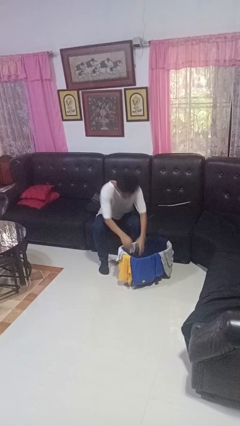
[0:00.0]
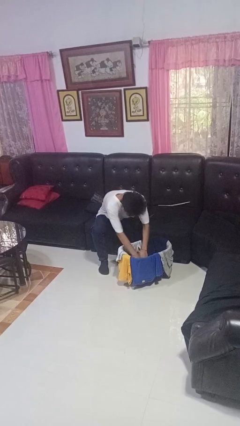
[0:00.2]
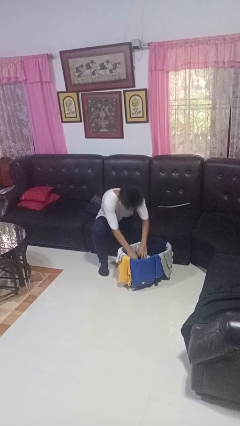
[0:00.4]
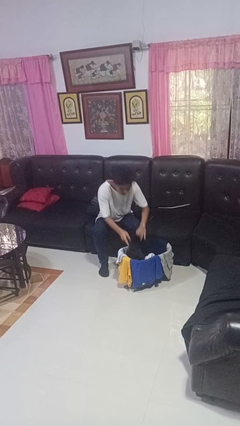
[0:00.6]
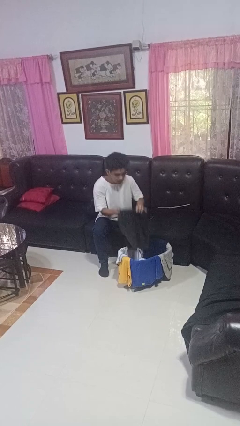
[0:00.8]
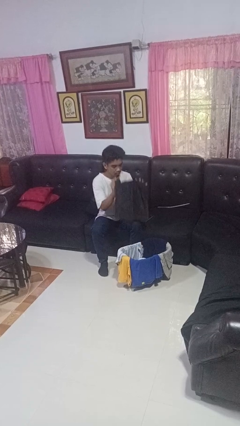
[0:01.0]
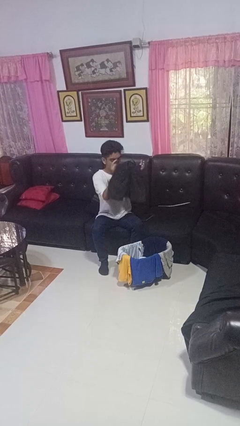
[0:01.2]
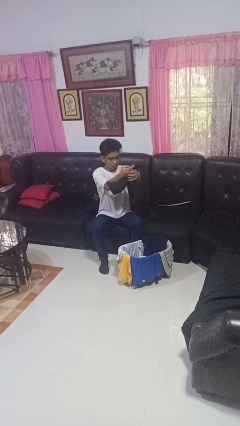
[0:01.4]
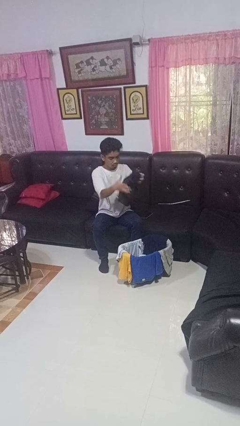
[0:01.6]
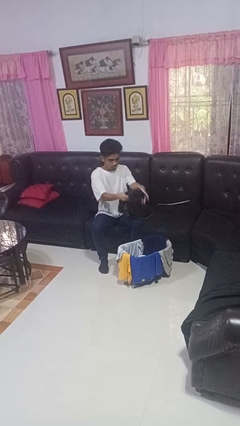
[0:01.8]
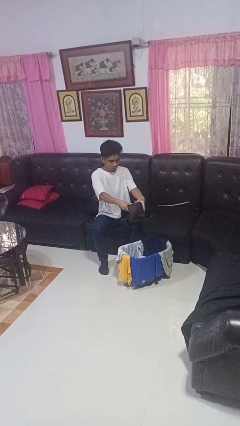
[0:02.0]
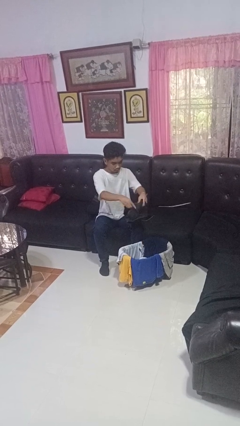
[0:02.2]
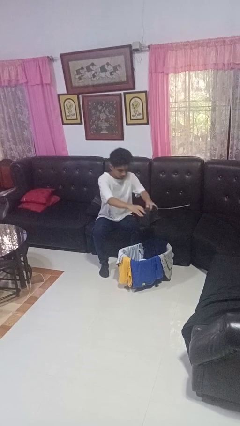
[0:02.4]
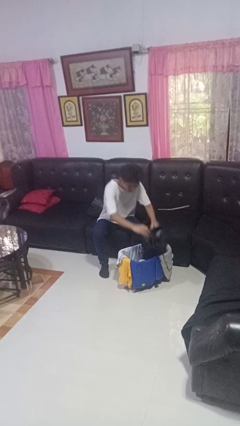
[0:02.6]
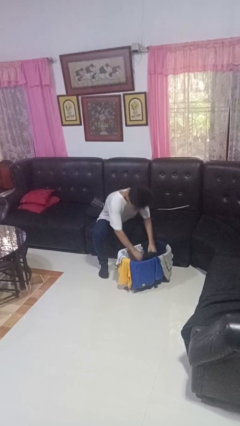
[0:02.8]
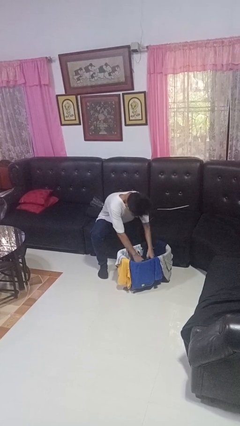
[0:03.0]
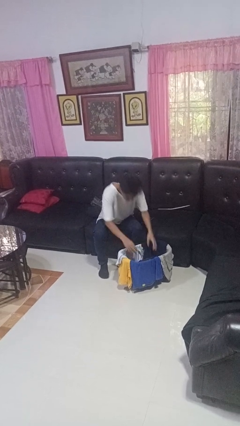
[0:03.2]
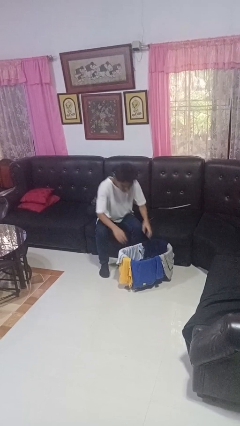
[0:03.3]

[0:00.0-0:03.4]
person folds pants

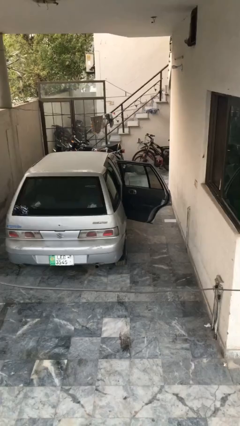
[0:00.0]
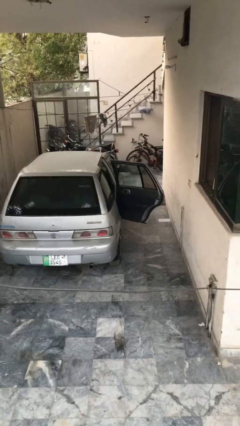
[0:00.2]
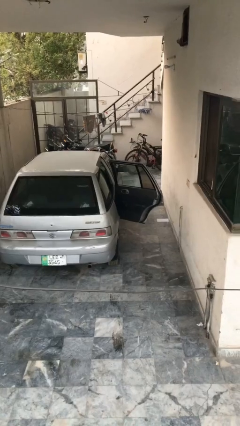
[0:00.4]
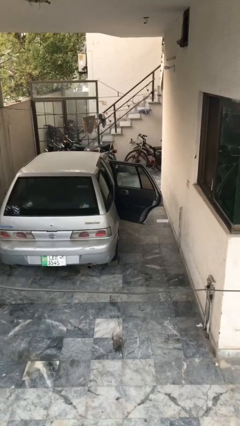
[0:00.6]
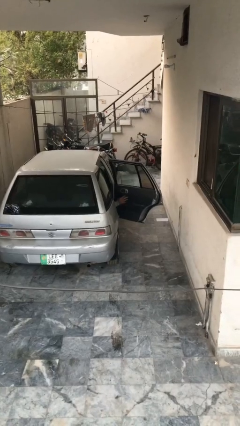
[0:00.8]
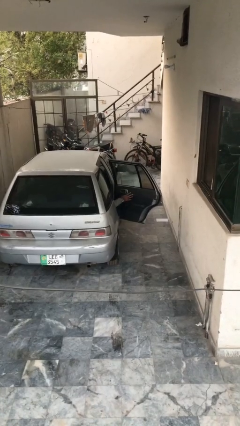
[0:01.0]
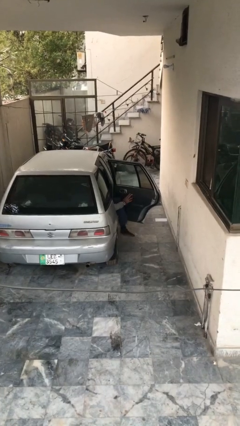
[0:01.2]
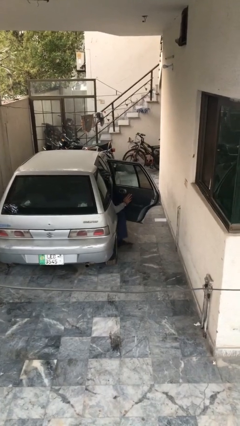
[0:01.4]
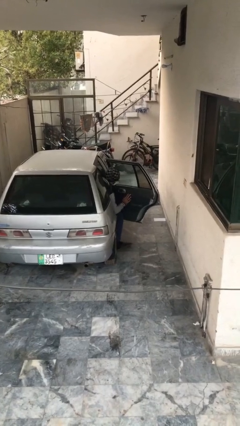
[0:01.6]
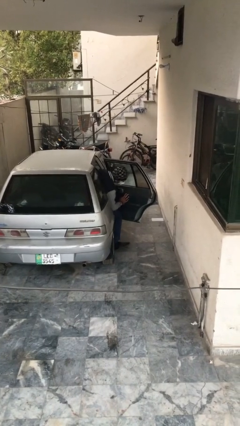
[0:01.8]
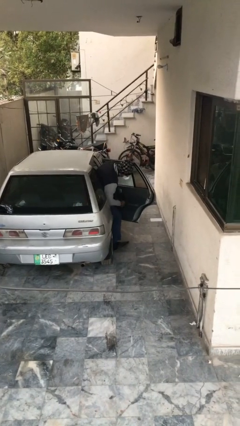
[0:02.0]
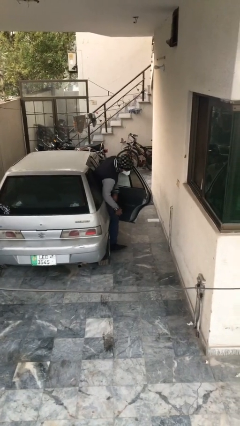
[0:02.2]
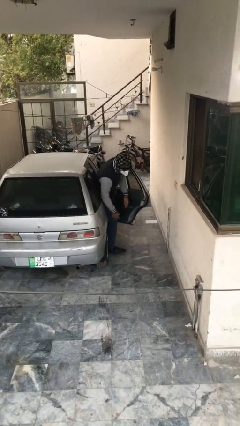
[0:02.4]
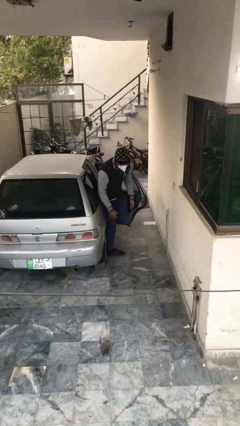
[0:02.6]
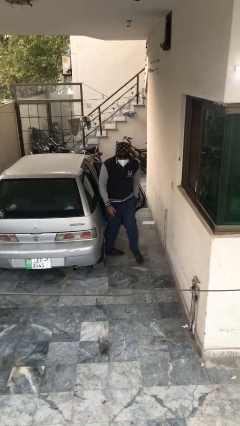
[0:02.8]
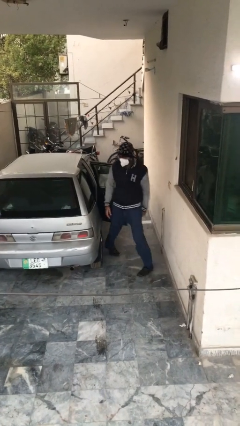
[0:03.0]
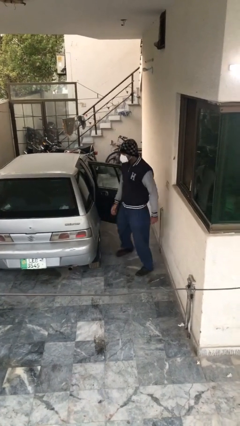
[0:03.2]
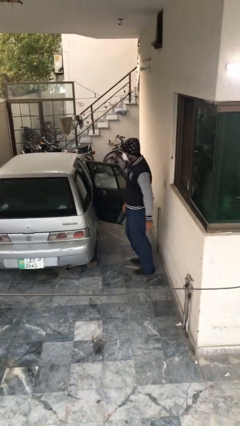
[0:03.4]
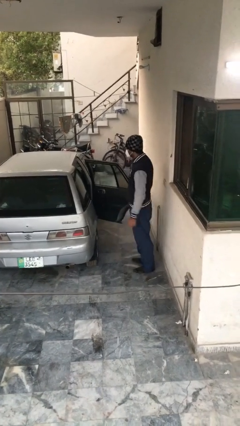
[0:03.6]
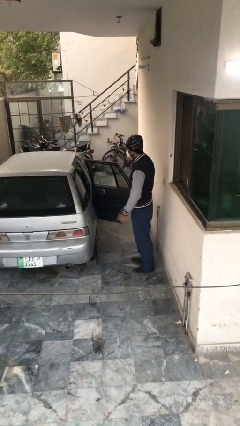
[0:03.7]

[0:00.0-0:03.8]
person exits car

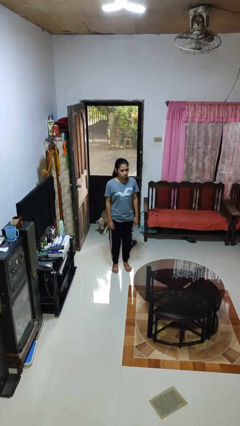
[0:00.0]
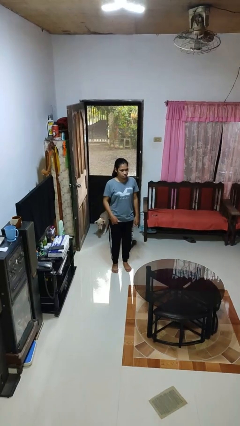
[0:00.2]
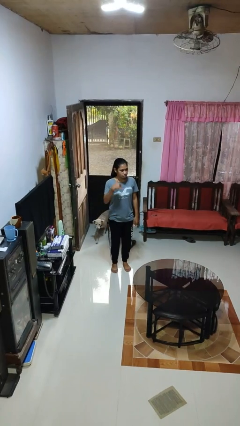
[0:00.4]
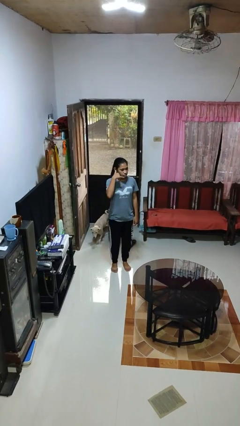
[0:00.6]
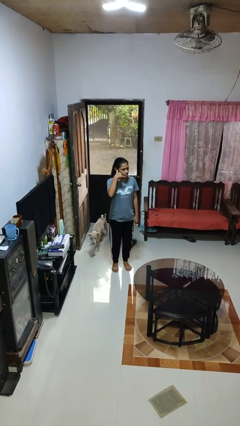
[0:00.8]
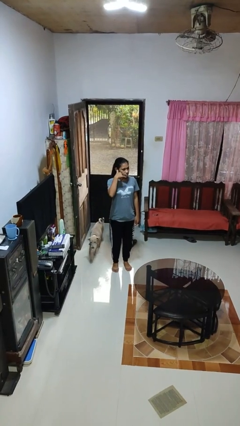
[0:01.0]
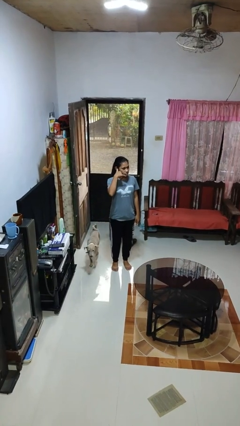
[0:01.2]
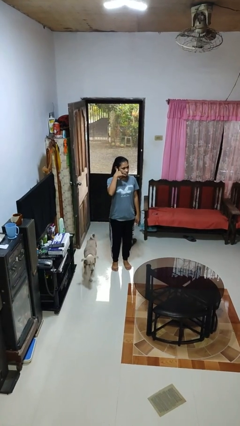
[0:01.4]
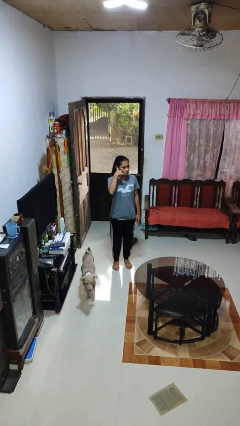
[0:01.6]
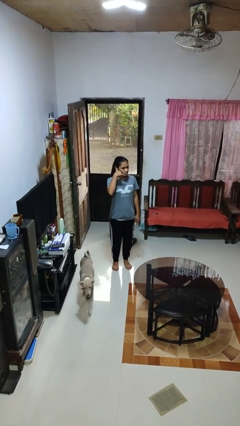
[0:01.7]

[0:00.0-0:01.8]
person gestures call me

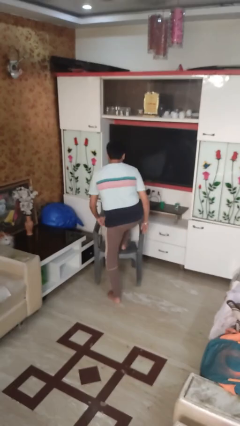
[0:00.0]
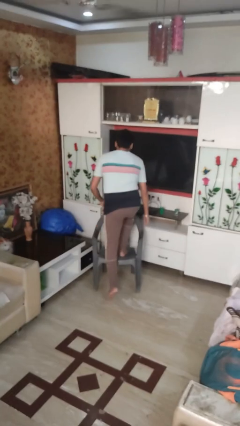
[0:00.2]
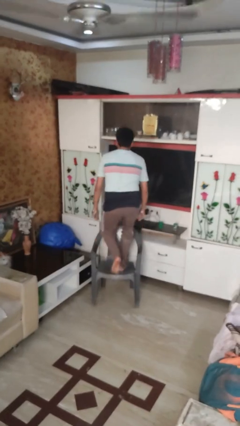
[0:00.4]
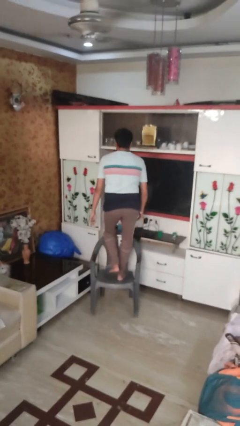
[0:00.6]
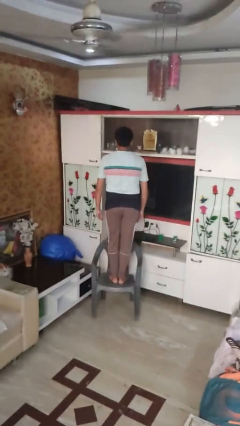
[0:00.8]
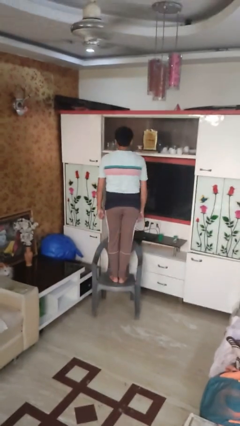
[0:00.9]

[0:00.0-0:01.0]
person climbs on chair

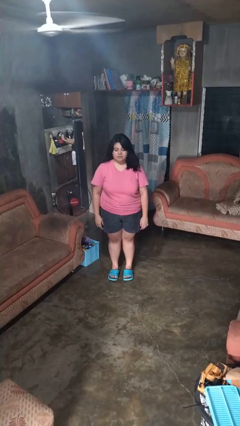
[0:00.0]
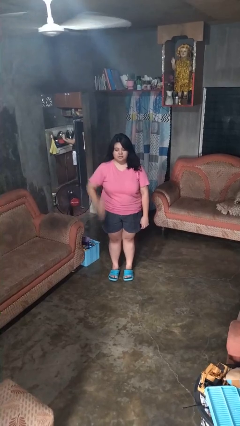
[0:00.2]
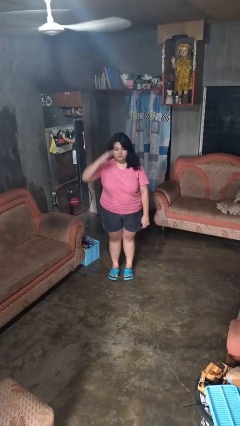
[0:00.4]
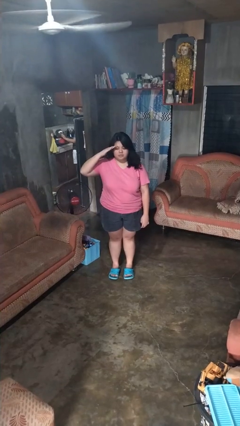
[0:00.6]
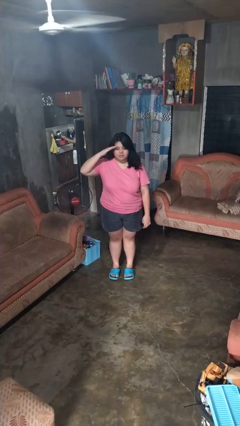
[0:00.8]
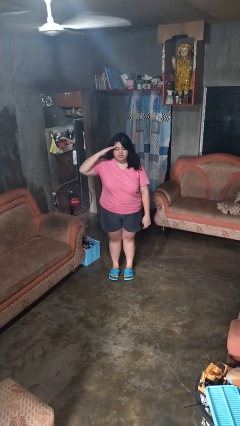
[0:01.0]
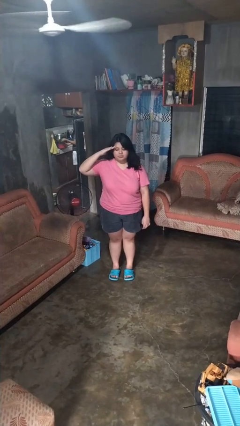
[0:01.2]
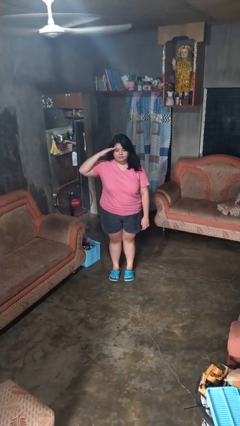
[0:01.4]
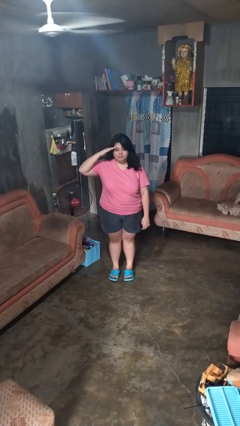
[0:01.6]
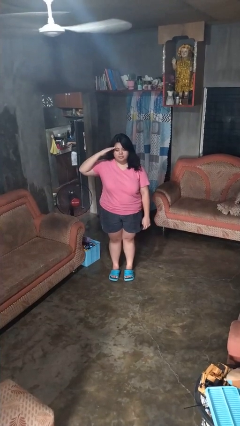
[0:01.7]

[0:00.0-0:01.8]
person salutes

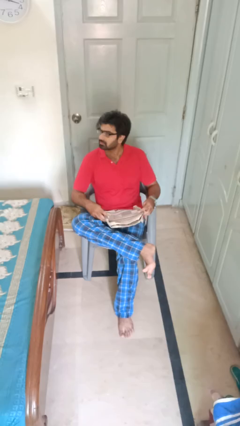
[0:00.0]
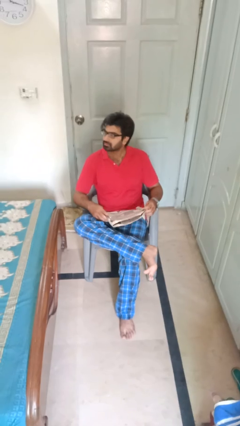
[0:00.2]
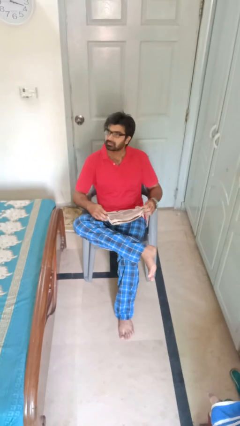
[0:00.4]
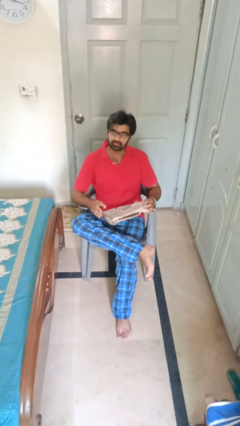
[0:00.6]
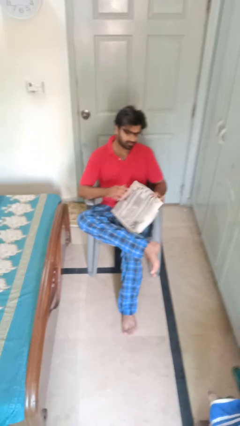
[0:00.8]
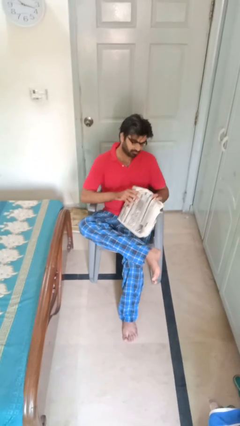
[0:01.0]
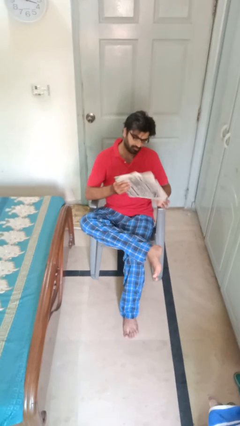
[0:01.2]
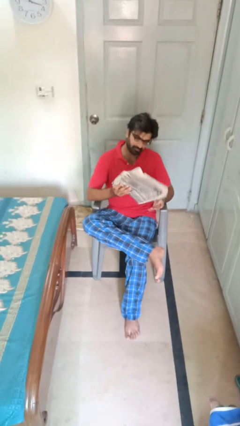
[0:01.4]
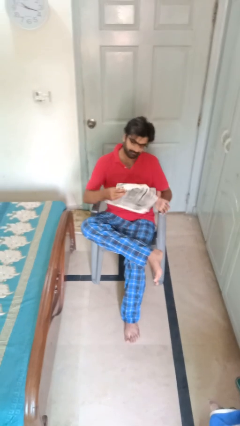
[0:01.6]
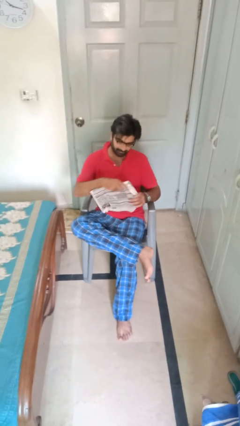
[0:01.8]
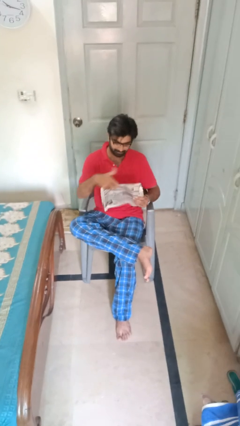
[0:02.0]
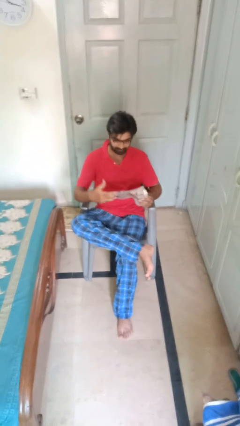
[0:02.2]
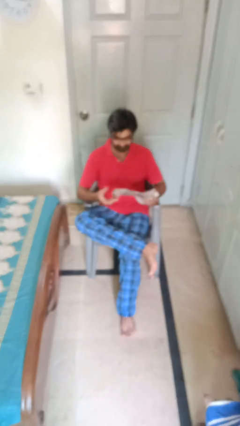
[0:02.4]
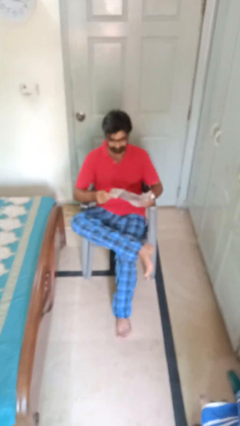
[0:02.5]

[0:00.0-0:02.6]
person reads newspaper

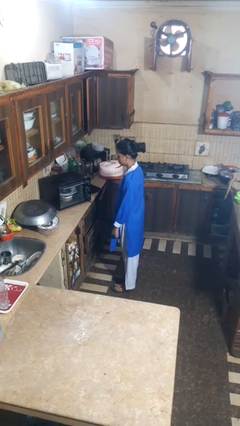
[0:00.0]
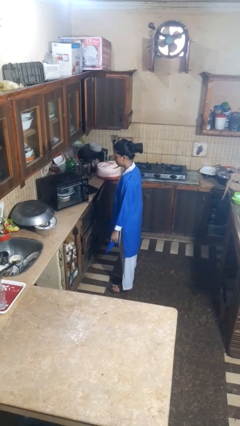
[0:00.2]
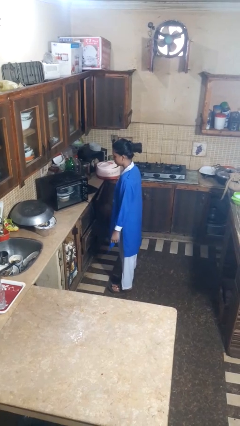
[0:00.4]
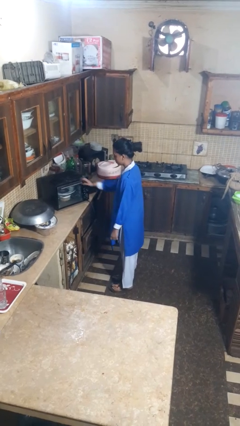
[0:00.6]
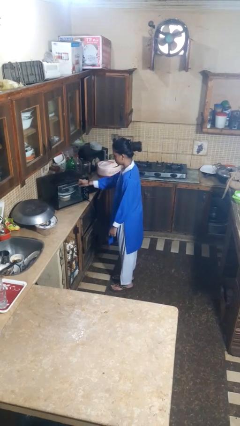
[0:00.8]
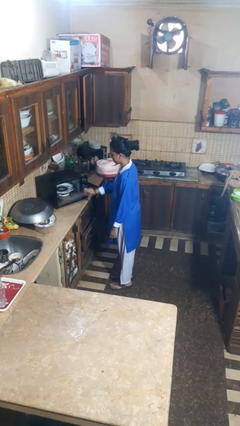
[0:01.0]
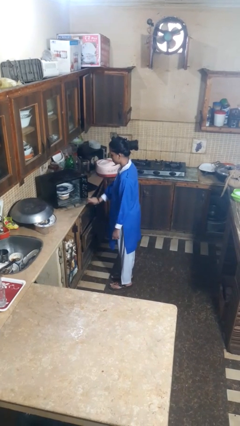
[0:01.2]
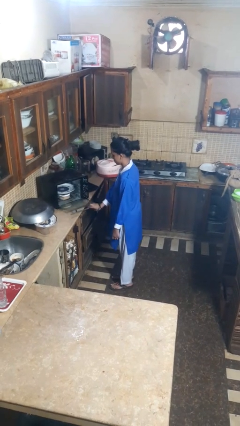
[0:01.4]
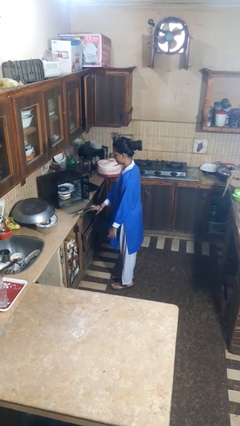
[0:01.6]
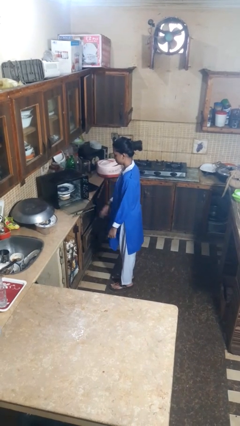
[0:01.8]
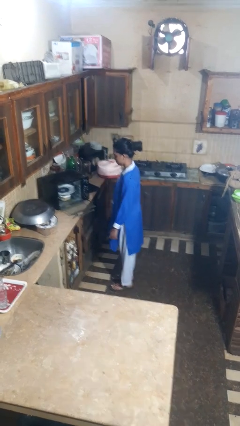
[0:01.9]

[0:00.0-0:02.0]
person opens dishwasher

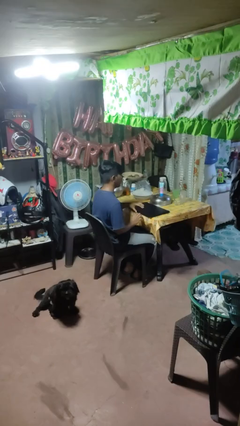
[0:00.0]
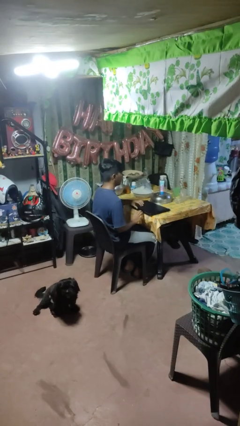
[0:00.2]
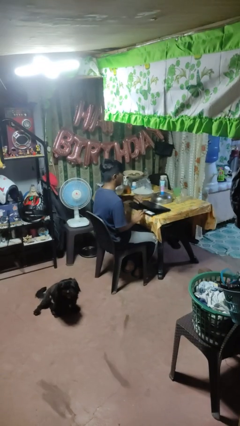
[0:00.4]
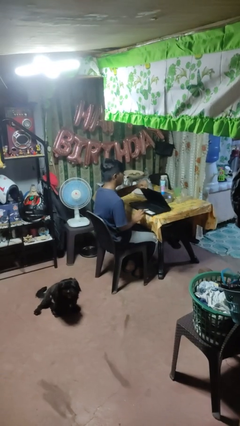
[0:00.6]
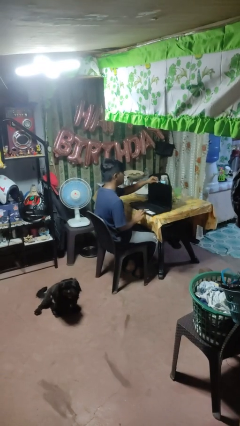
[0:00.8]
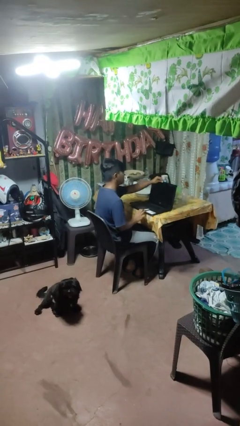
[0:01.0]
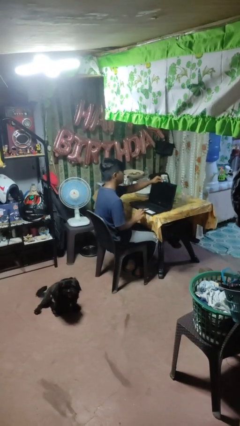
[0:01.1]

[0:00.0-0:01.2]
person opens laptop
